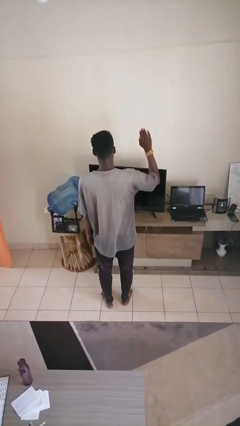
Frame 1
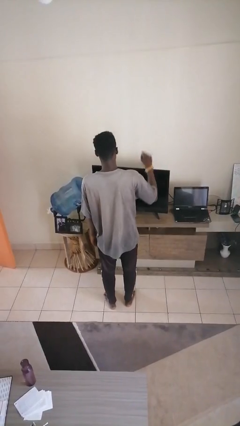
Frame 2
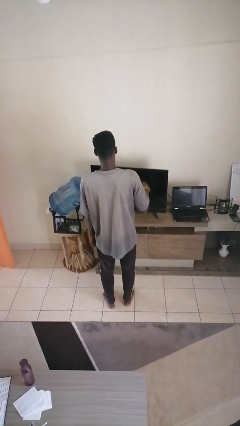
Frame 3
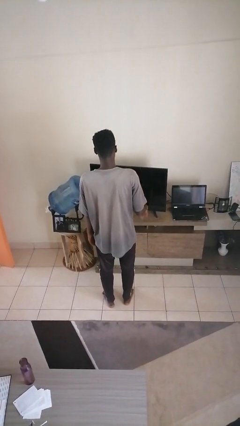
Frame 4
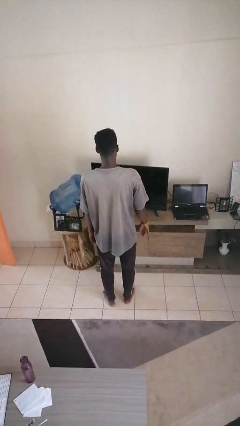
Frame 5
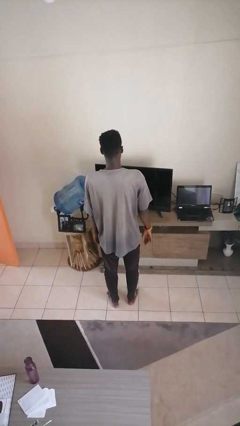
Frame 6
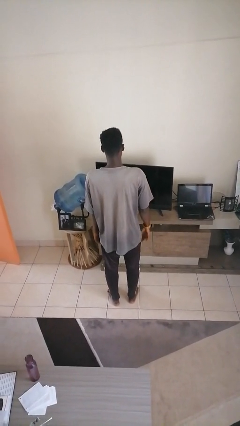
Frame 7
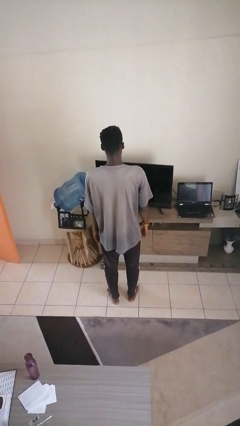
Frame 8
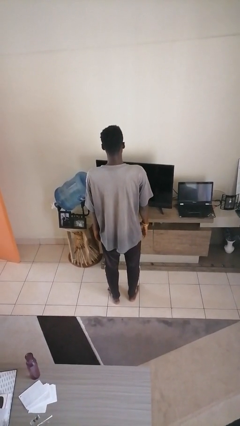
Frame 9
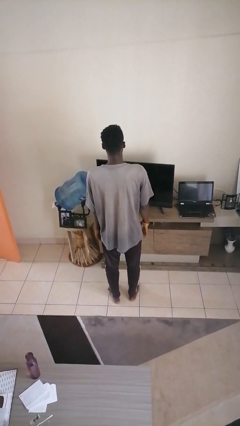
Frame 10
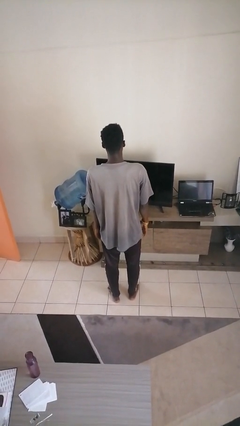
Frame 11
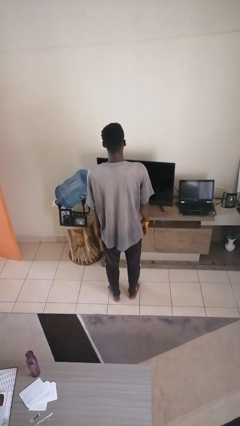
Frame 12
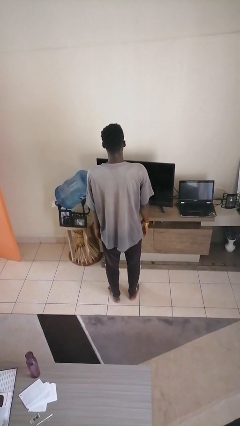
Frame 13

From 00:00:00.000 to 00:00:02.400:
person gestures lower hand

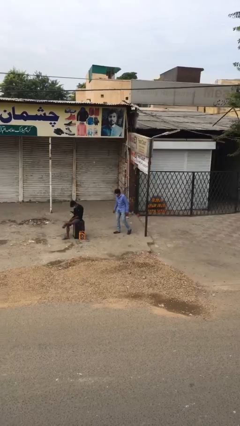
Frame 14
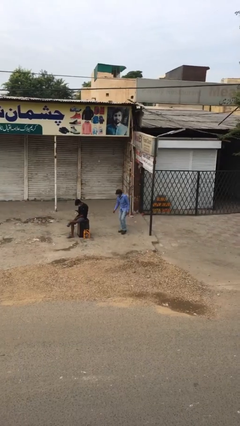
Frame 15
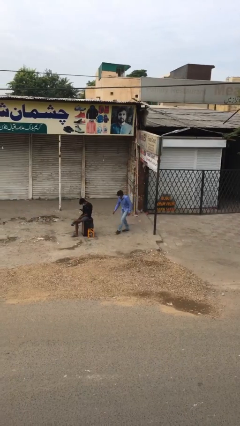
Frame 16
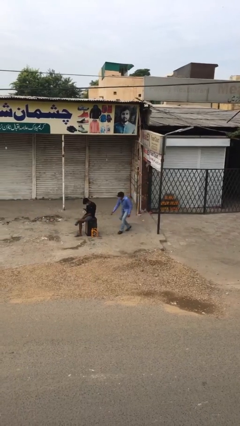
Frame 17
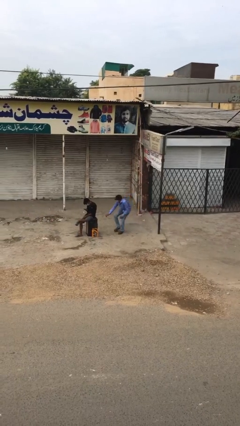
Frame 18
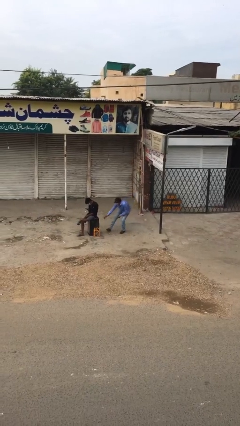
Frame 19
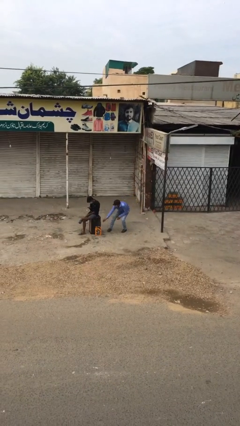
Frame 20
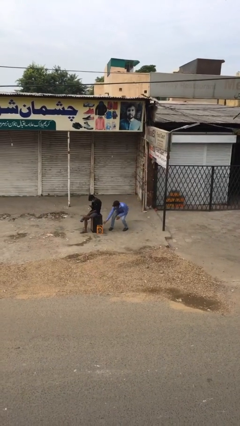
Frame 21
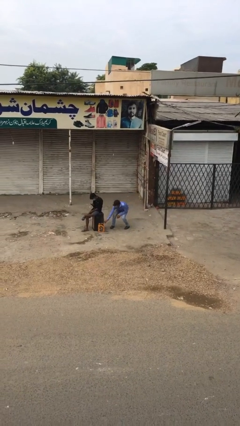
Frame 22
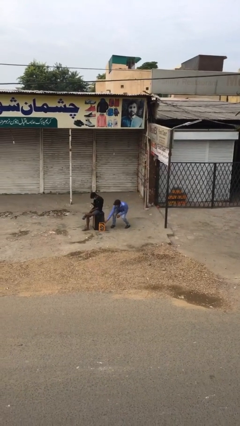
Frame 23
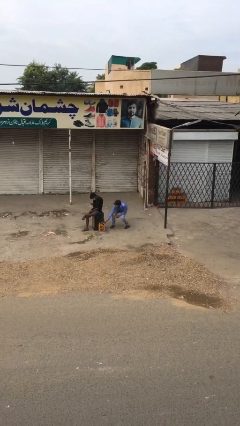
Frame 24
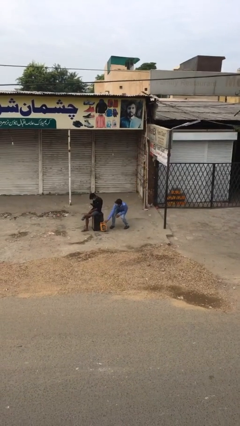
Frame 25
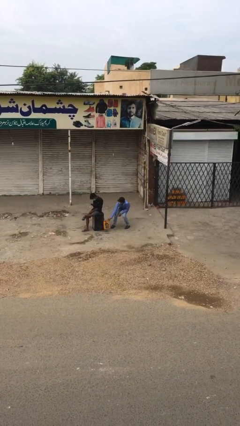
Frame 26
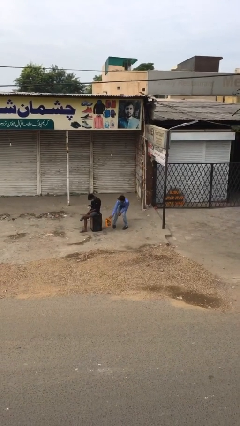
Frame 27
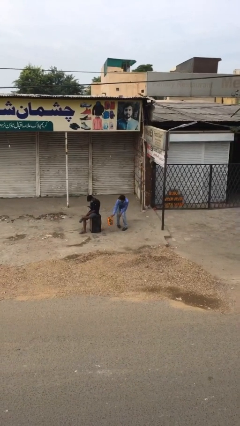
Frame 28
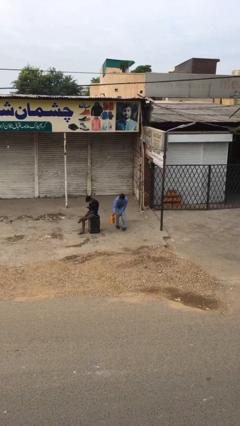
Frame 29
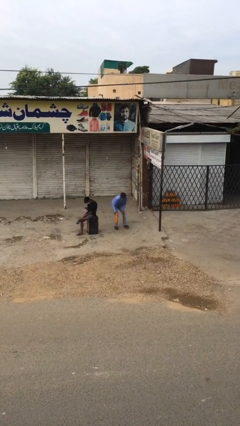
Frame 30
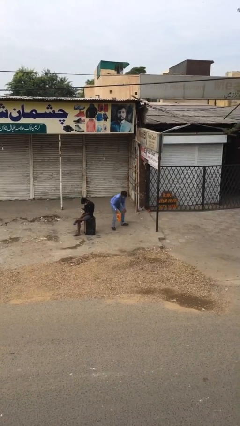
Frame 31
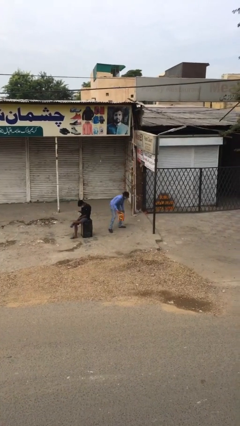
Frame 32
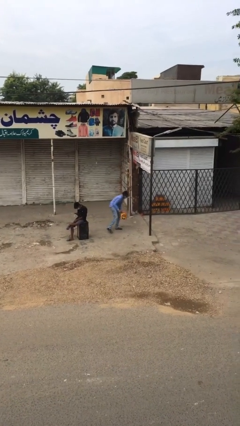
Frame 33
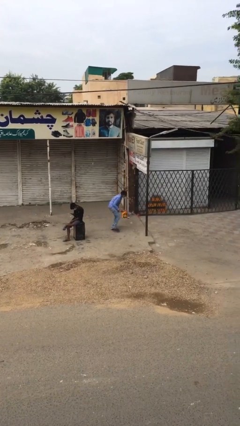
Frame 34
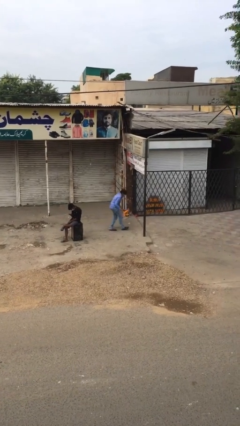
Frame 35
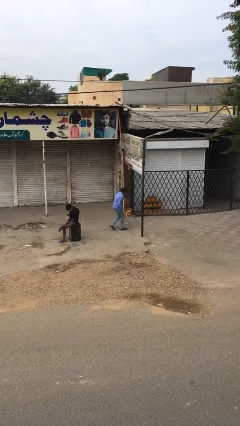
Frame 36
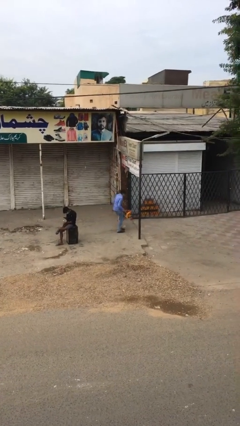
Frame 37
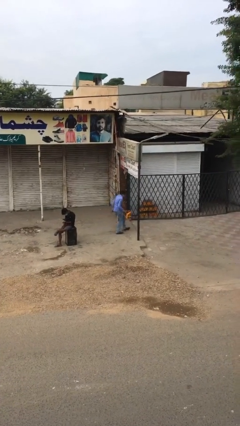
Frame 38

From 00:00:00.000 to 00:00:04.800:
person steals object from person

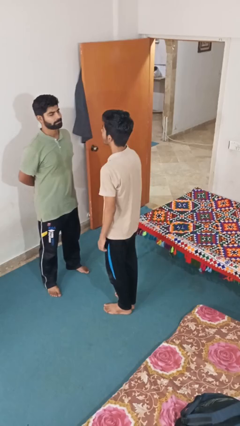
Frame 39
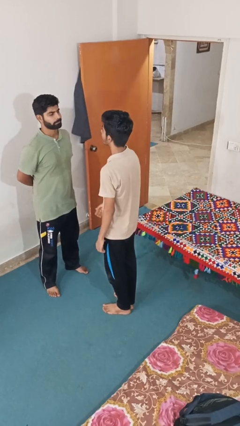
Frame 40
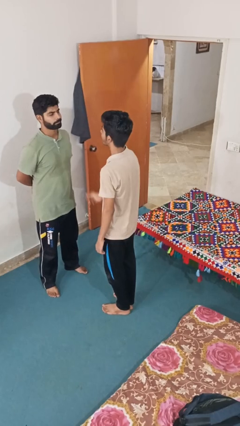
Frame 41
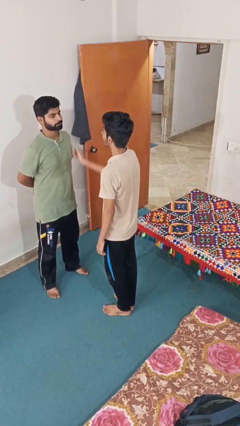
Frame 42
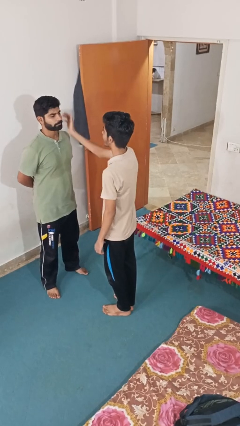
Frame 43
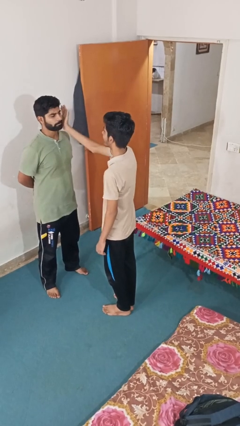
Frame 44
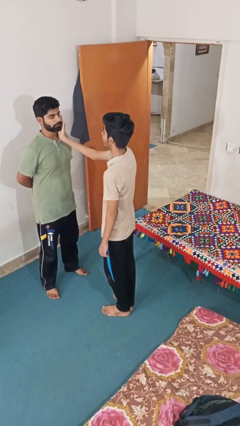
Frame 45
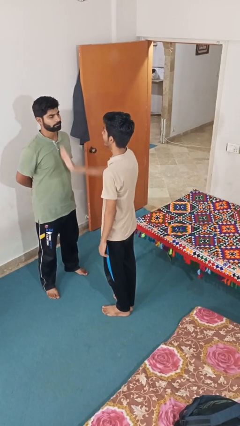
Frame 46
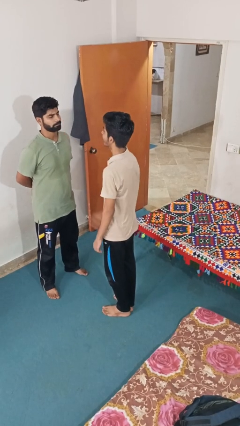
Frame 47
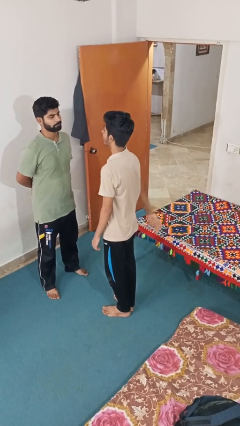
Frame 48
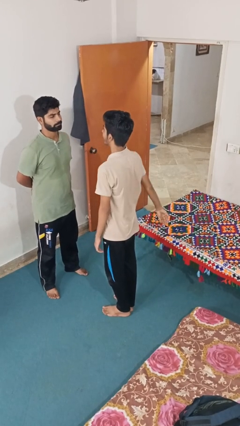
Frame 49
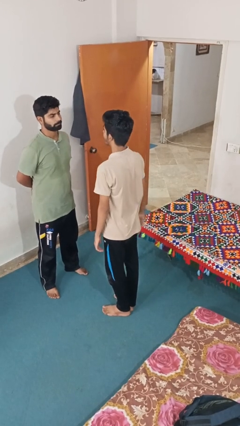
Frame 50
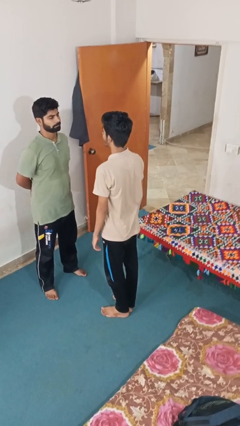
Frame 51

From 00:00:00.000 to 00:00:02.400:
person touches face of person

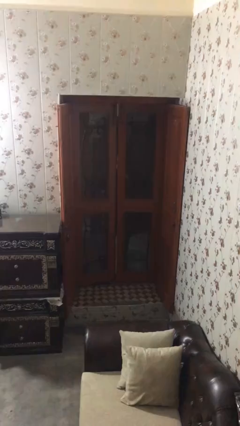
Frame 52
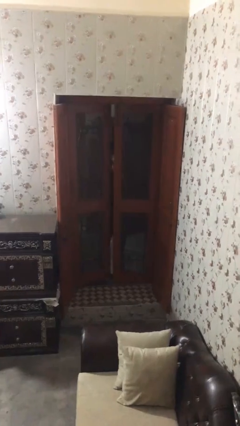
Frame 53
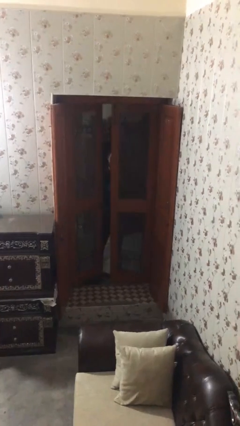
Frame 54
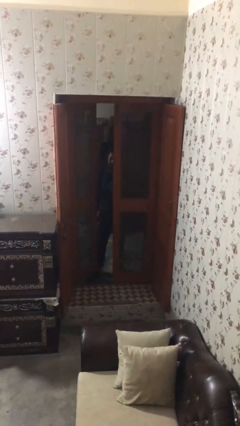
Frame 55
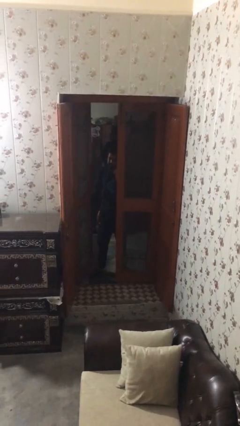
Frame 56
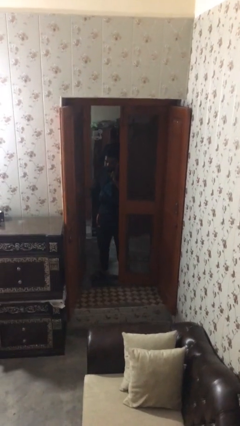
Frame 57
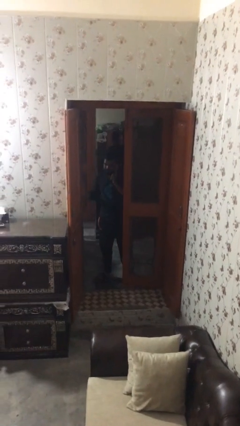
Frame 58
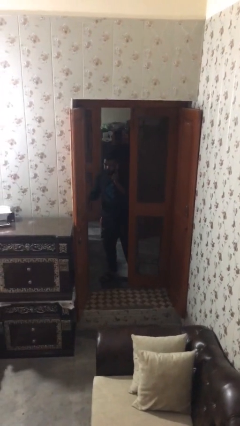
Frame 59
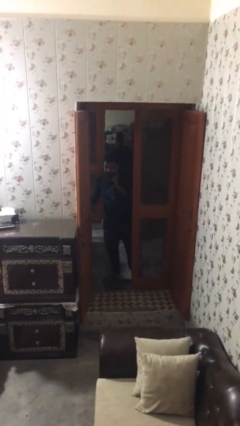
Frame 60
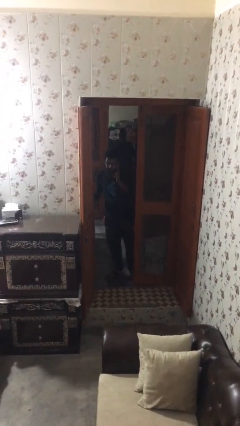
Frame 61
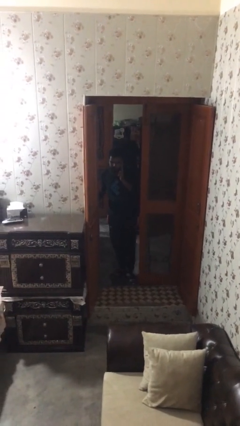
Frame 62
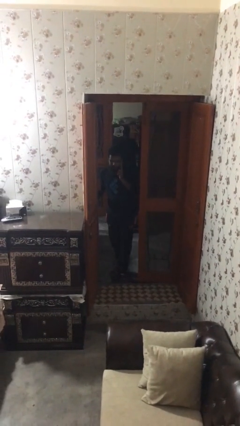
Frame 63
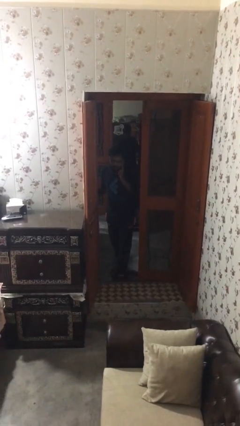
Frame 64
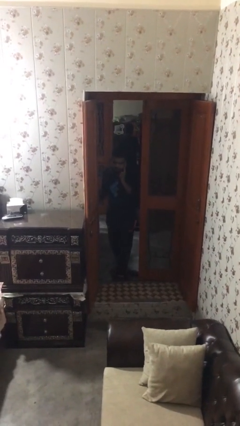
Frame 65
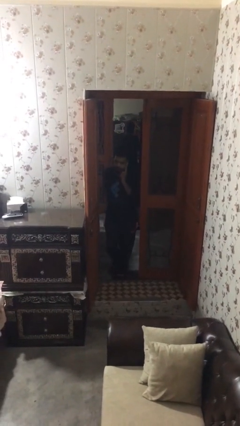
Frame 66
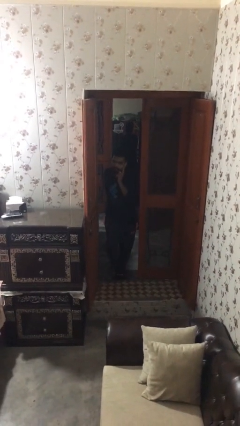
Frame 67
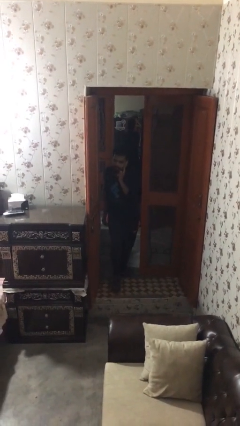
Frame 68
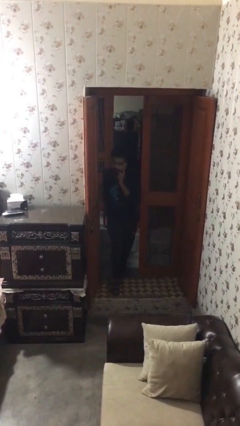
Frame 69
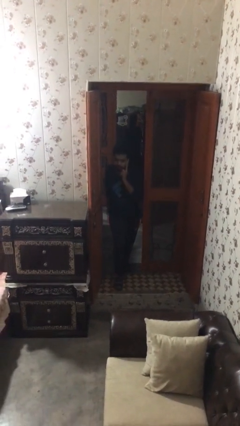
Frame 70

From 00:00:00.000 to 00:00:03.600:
person opens facility door

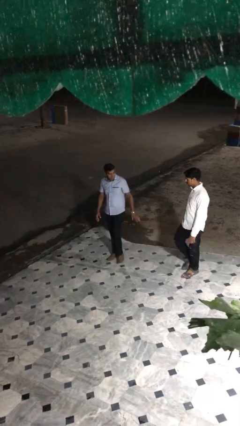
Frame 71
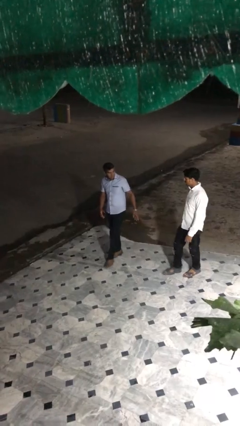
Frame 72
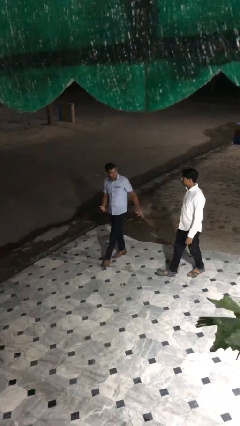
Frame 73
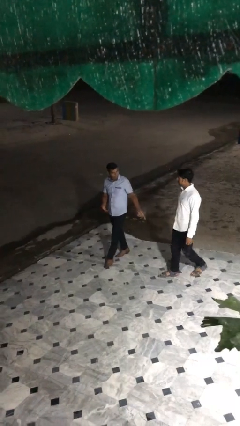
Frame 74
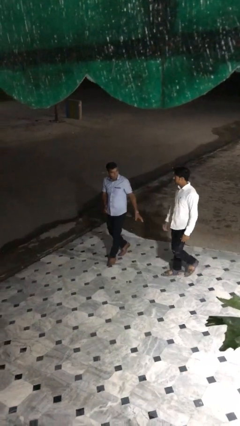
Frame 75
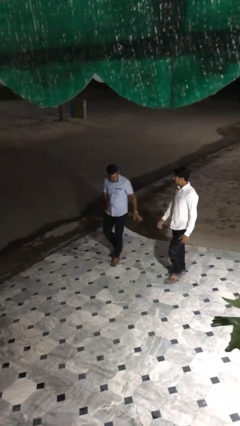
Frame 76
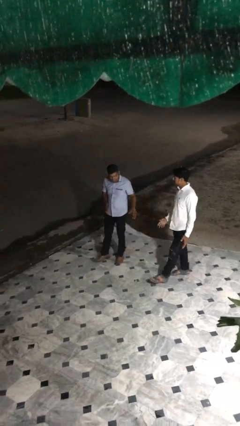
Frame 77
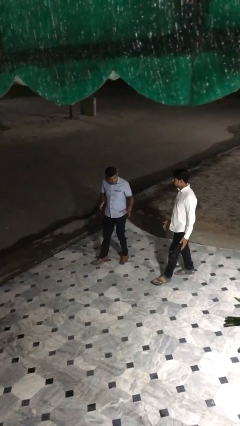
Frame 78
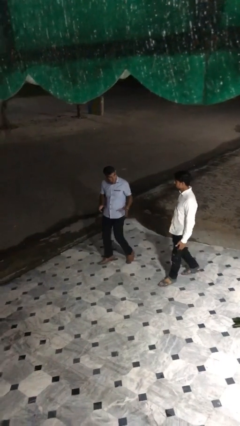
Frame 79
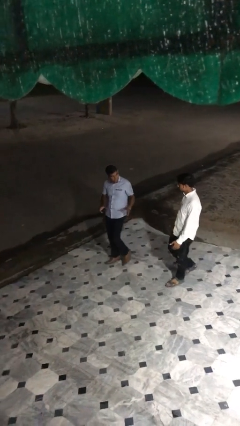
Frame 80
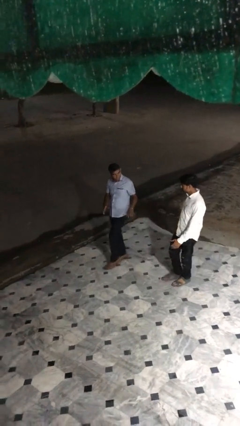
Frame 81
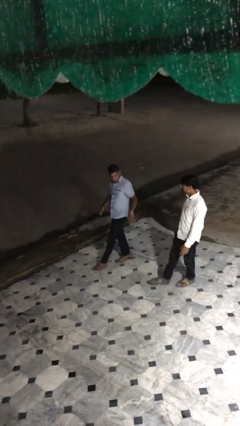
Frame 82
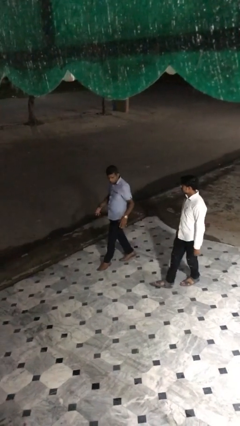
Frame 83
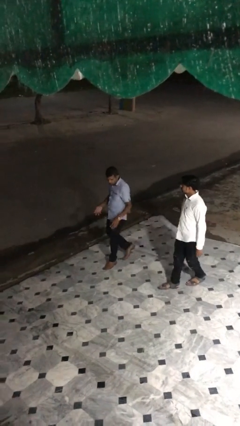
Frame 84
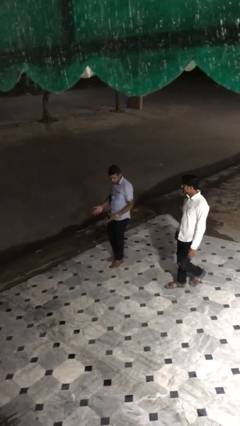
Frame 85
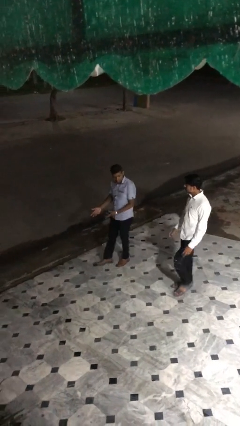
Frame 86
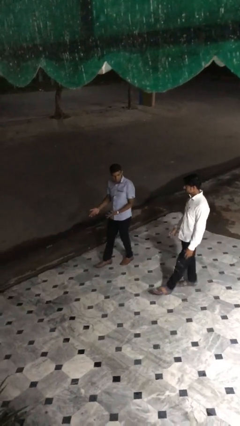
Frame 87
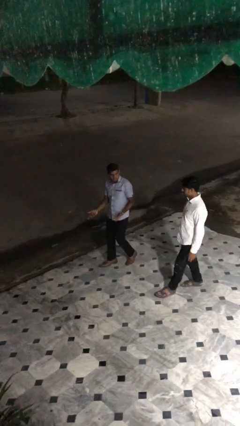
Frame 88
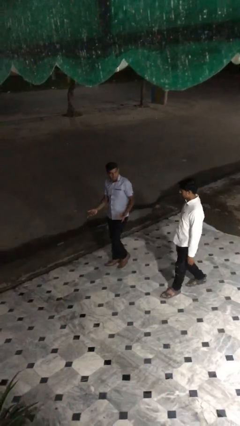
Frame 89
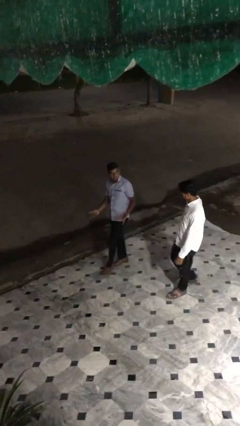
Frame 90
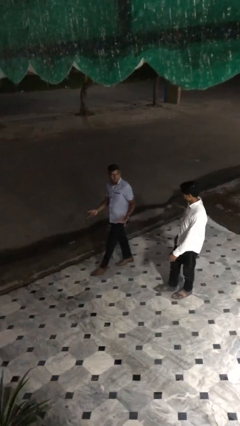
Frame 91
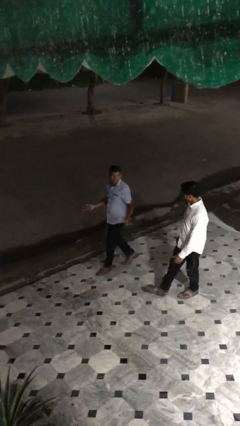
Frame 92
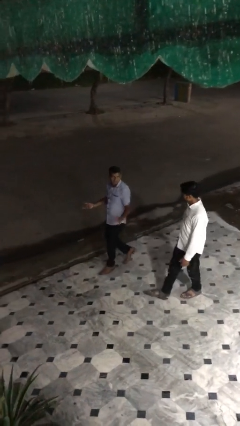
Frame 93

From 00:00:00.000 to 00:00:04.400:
person talks to person
